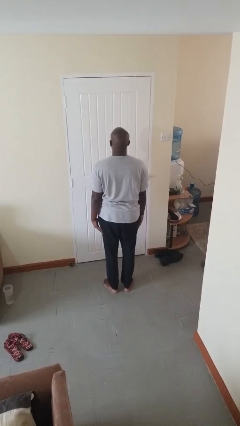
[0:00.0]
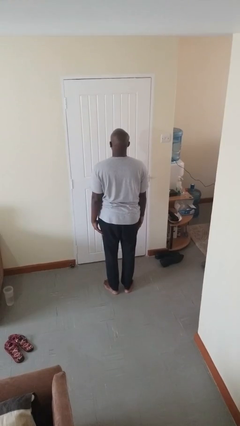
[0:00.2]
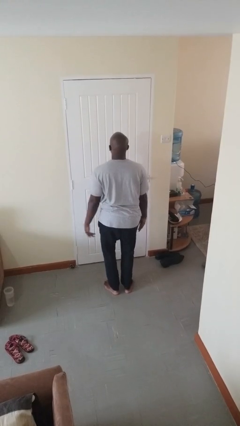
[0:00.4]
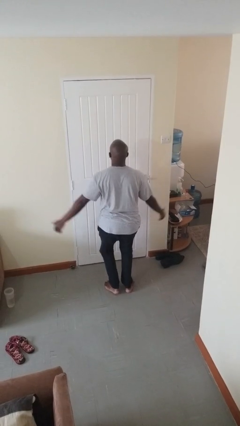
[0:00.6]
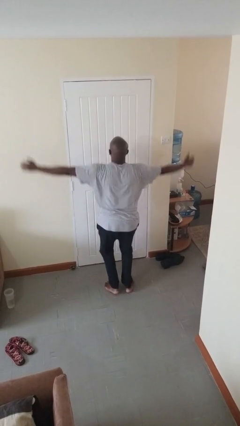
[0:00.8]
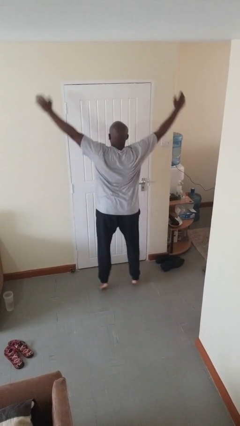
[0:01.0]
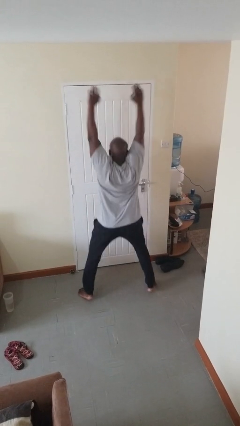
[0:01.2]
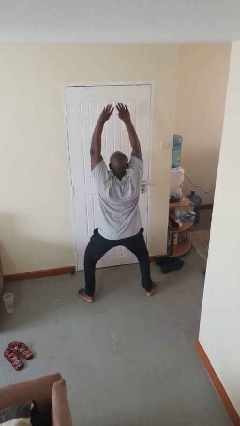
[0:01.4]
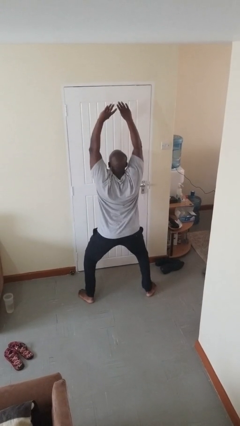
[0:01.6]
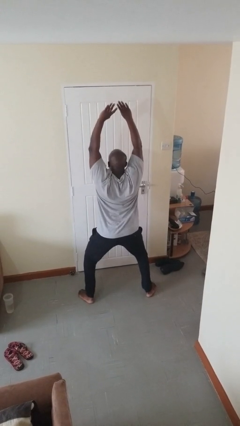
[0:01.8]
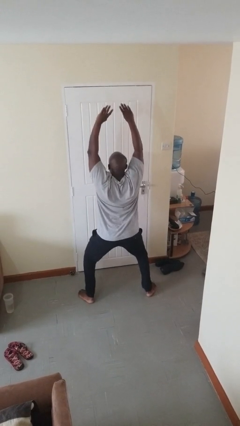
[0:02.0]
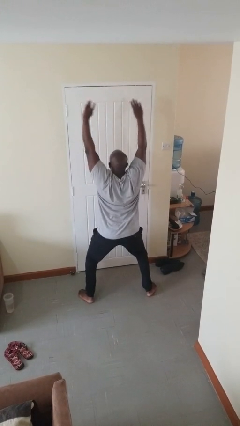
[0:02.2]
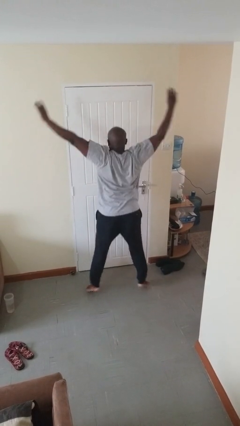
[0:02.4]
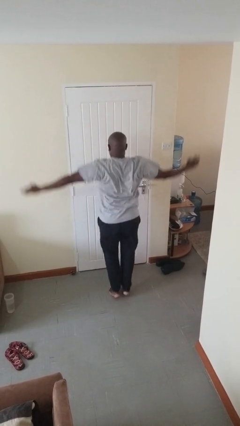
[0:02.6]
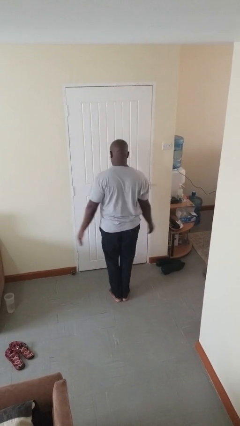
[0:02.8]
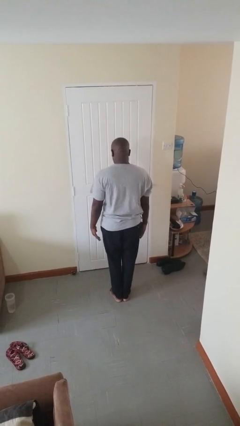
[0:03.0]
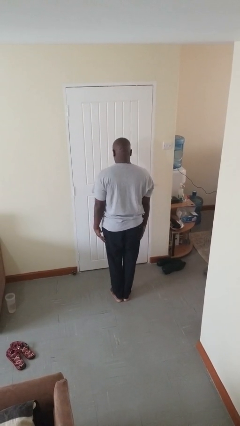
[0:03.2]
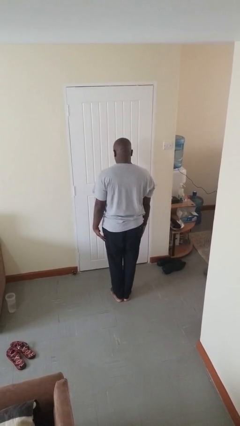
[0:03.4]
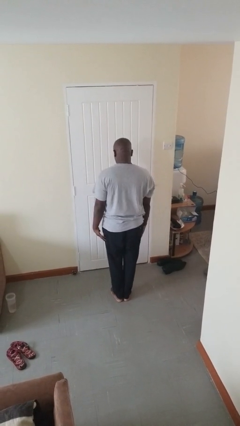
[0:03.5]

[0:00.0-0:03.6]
person exercises with jumping jacks

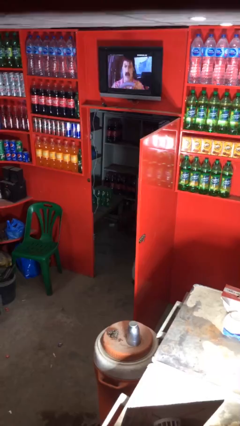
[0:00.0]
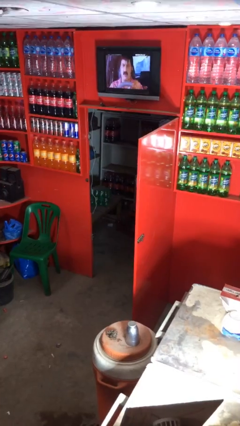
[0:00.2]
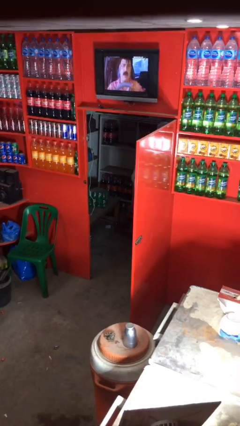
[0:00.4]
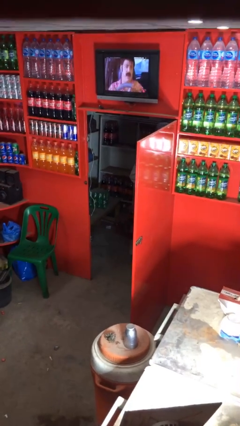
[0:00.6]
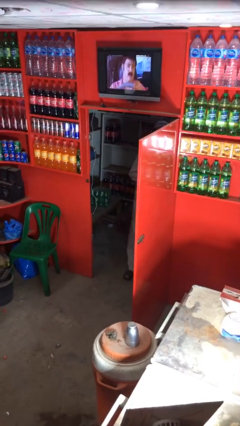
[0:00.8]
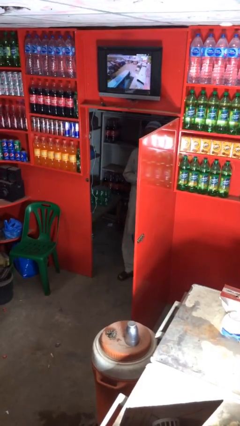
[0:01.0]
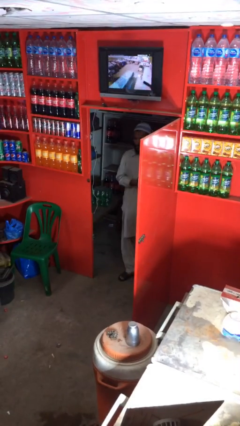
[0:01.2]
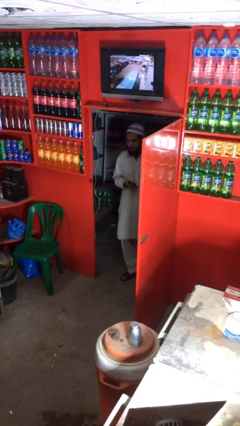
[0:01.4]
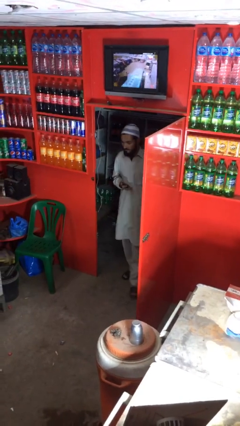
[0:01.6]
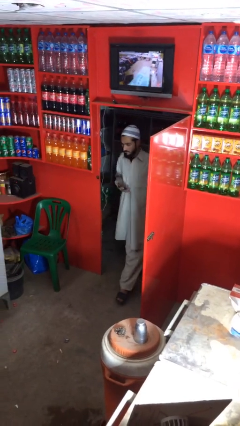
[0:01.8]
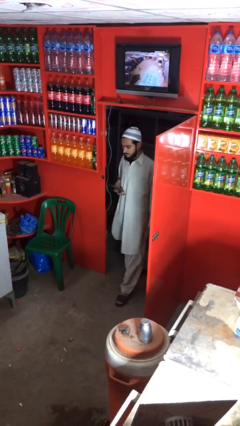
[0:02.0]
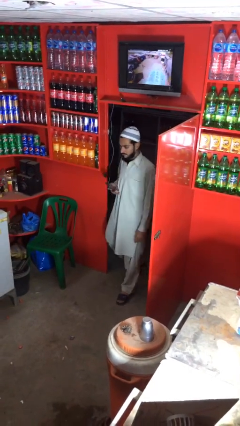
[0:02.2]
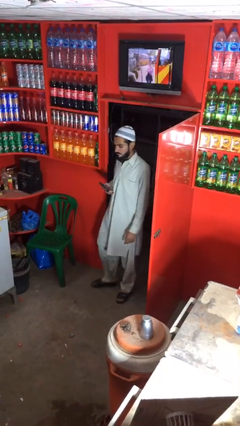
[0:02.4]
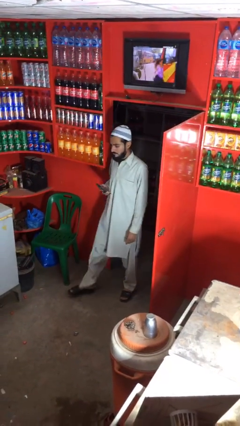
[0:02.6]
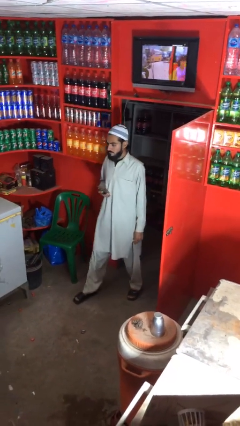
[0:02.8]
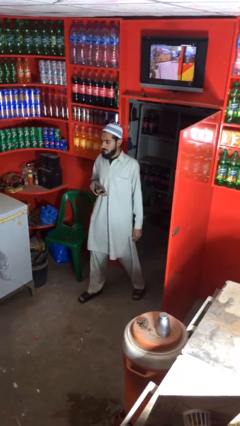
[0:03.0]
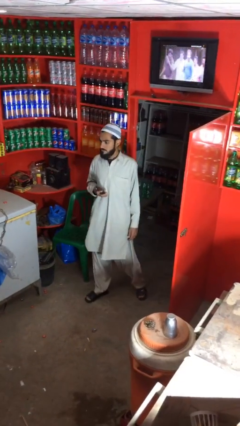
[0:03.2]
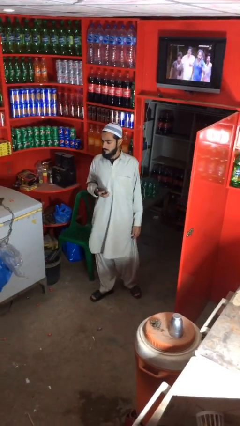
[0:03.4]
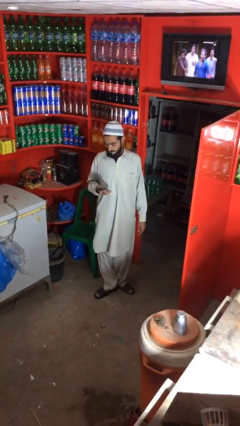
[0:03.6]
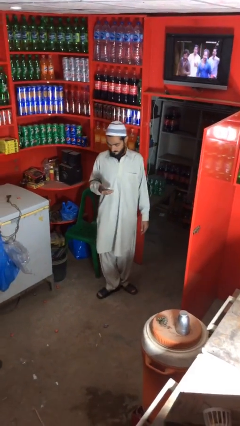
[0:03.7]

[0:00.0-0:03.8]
person exits scene through structure

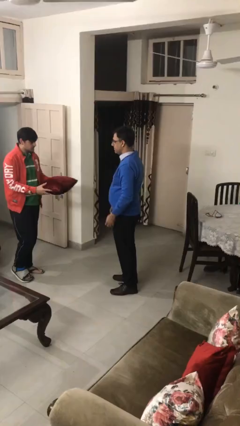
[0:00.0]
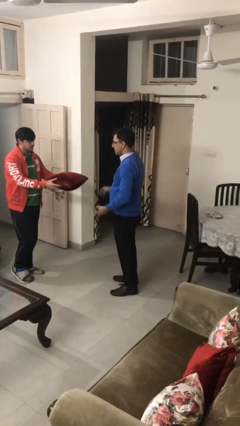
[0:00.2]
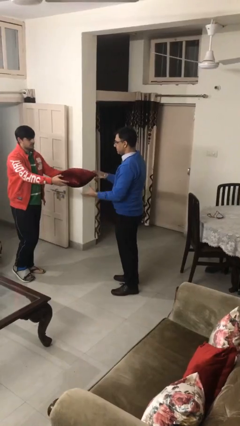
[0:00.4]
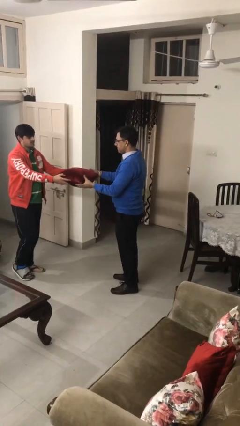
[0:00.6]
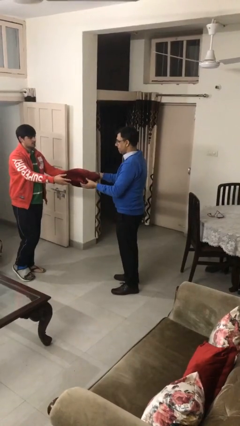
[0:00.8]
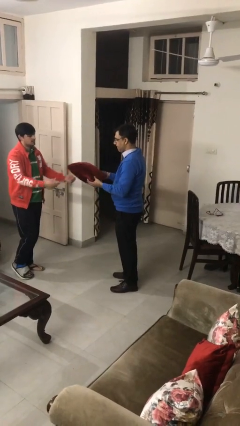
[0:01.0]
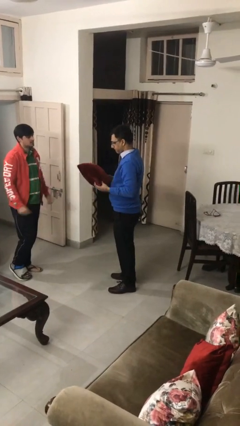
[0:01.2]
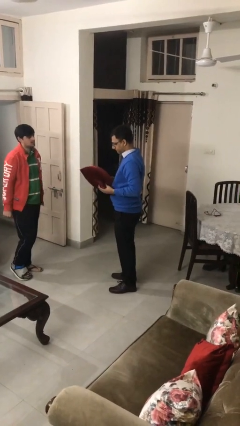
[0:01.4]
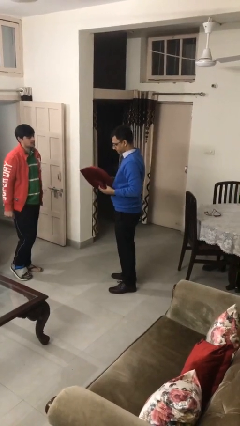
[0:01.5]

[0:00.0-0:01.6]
person transfers object to person

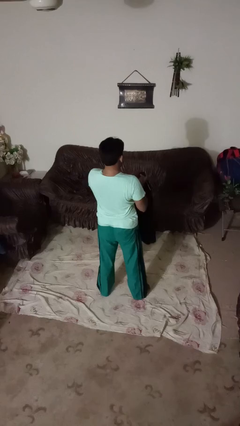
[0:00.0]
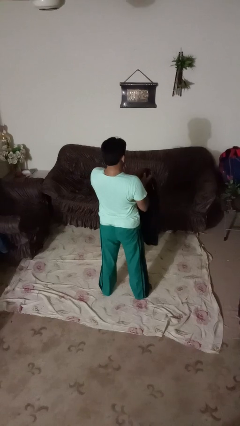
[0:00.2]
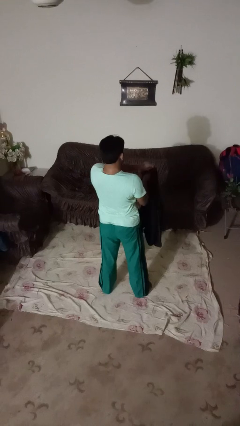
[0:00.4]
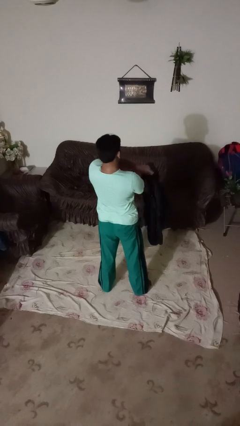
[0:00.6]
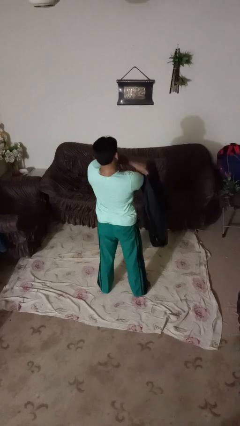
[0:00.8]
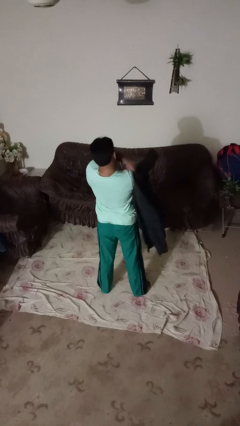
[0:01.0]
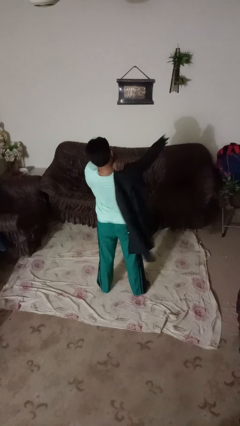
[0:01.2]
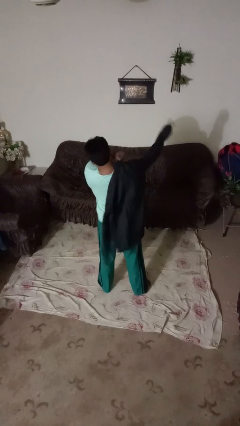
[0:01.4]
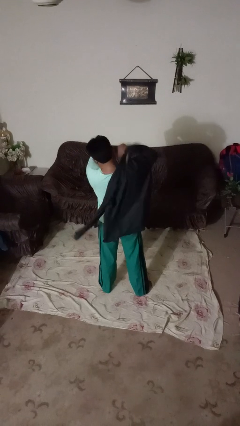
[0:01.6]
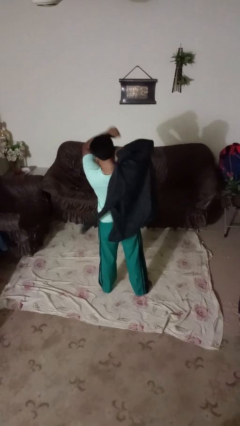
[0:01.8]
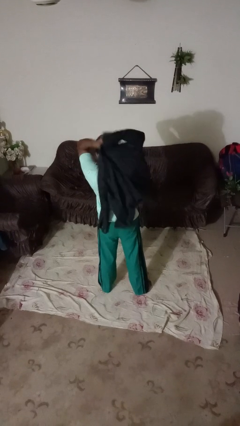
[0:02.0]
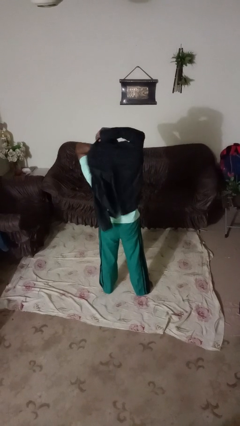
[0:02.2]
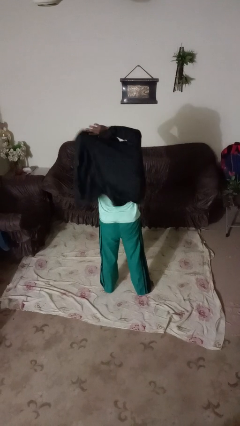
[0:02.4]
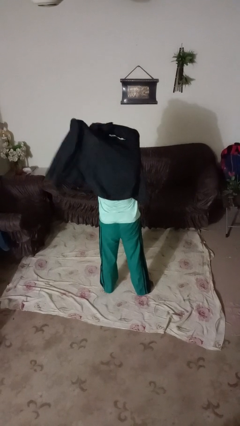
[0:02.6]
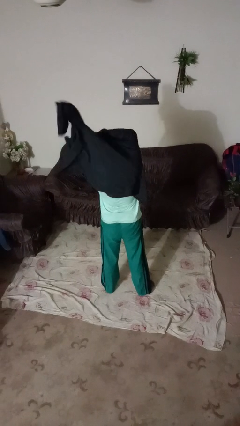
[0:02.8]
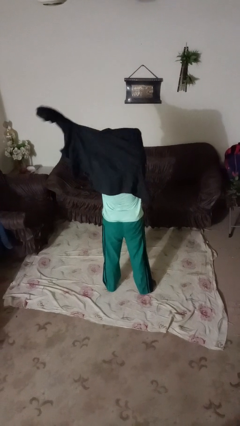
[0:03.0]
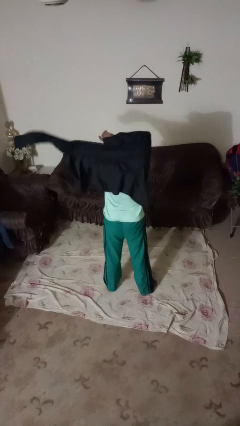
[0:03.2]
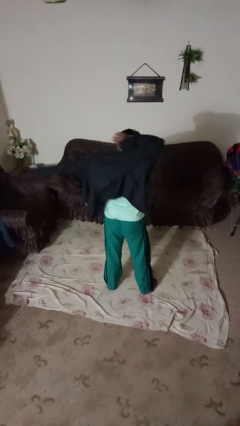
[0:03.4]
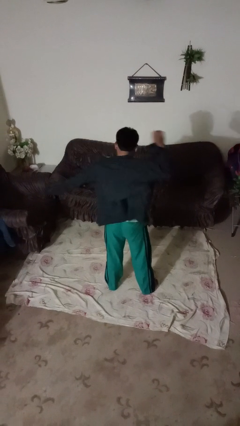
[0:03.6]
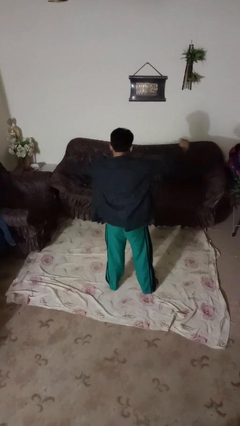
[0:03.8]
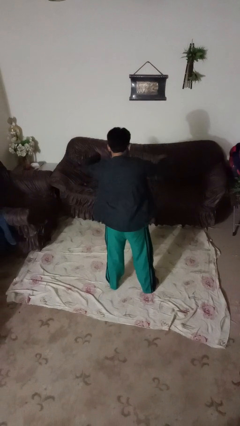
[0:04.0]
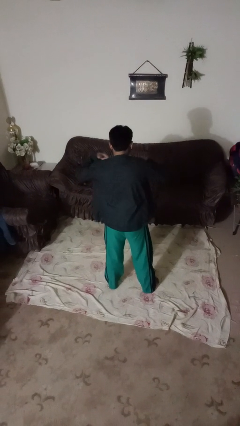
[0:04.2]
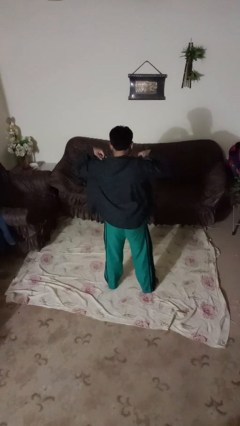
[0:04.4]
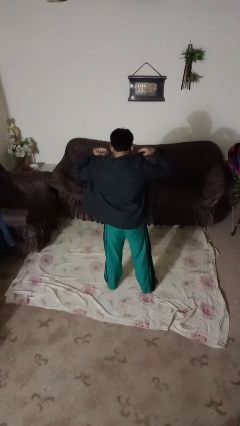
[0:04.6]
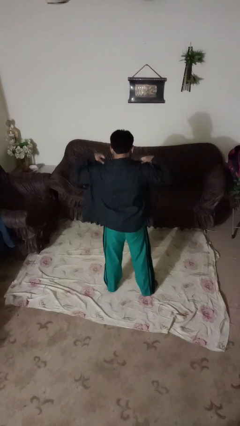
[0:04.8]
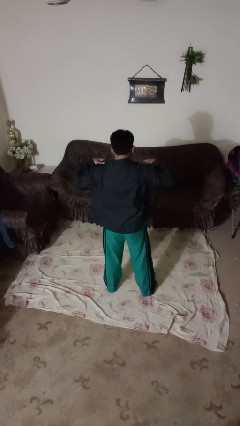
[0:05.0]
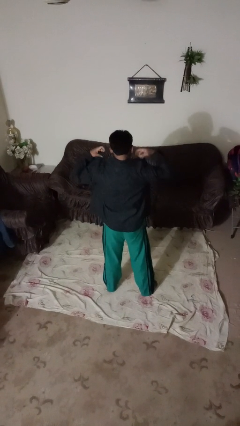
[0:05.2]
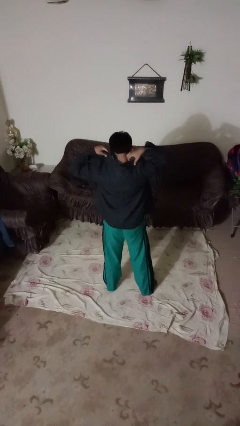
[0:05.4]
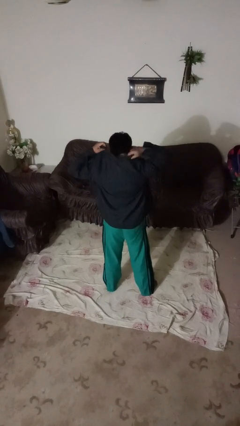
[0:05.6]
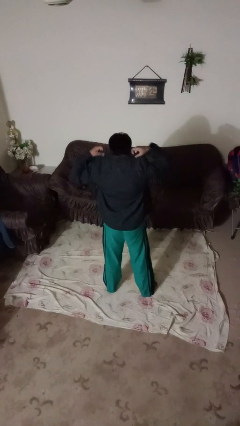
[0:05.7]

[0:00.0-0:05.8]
person puts on shirt

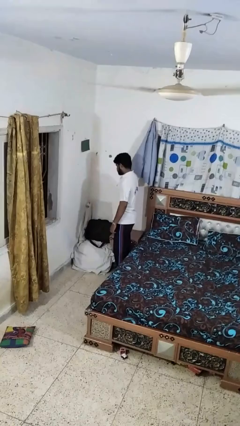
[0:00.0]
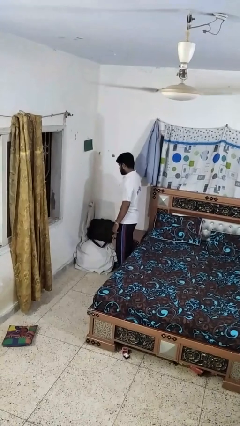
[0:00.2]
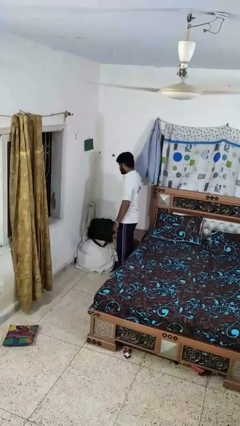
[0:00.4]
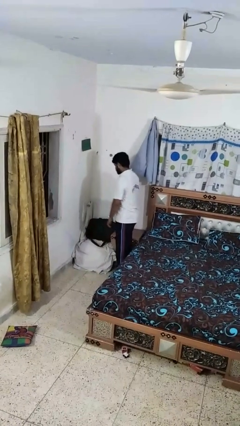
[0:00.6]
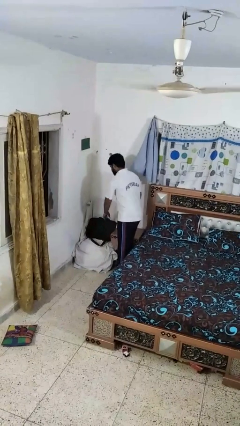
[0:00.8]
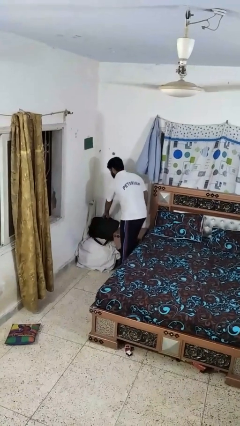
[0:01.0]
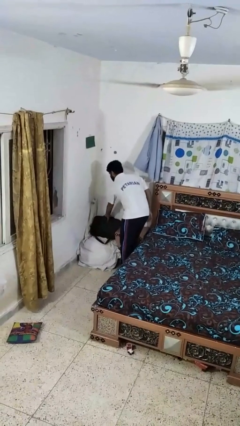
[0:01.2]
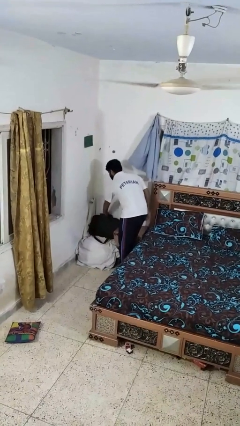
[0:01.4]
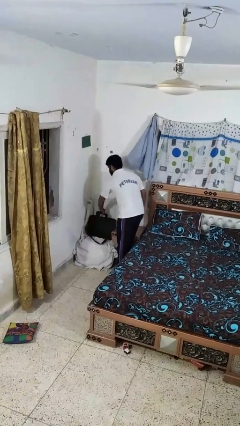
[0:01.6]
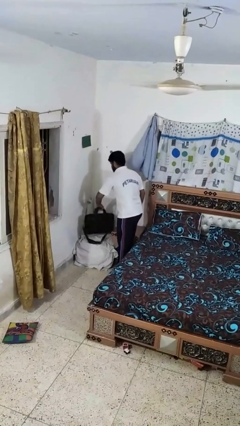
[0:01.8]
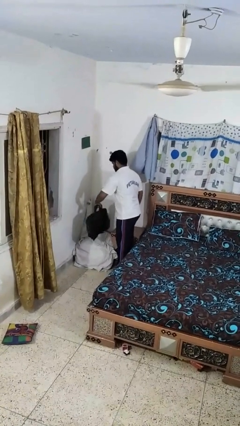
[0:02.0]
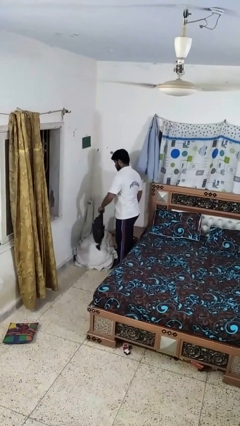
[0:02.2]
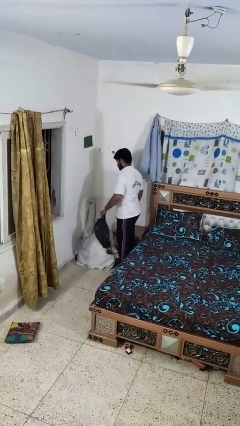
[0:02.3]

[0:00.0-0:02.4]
person picks up object from couch

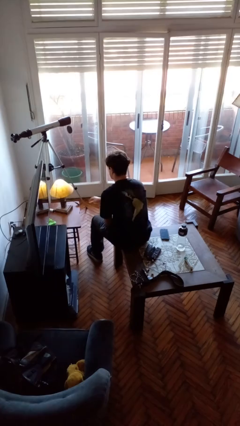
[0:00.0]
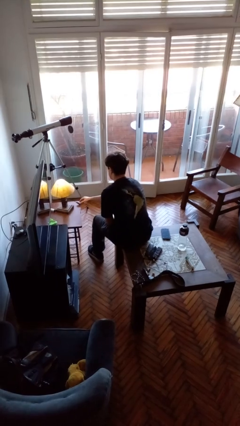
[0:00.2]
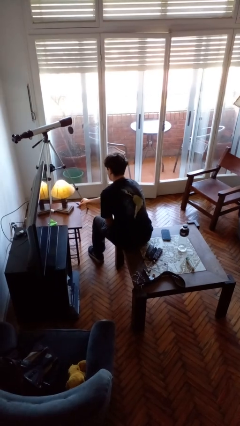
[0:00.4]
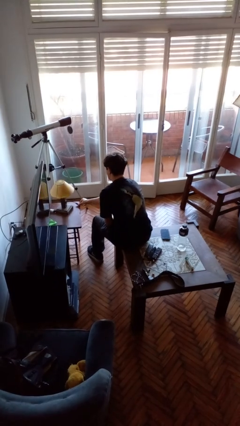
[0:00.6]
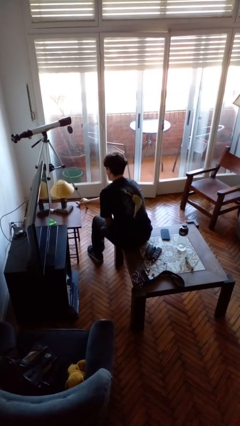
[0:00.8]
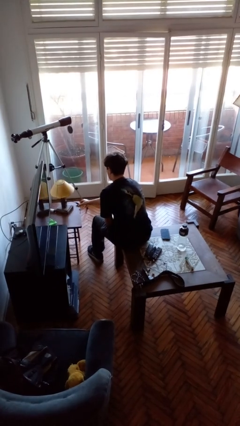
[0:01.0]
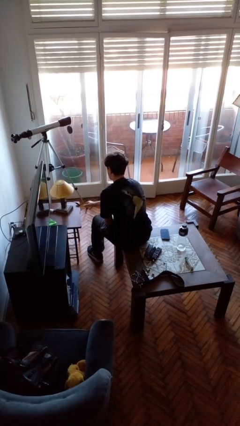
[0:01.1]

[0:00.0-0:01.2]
person turns off lamp
